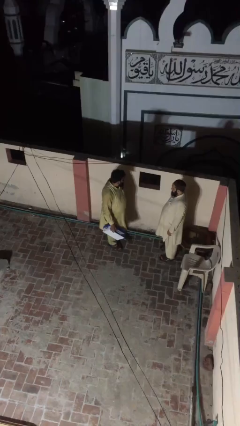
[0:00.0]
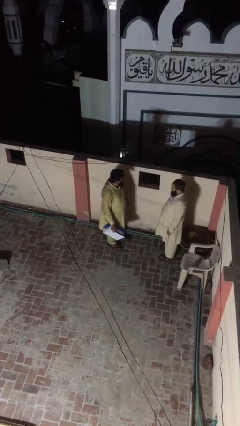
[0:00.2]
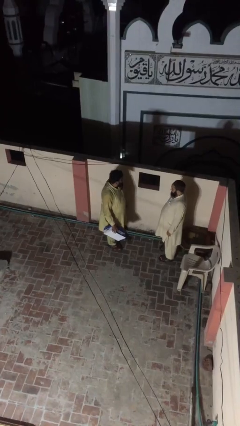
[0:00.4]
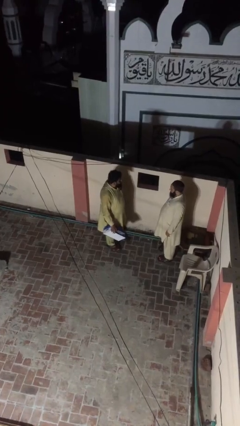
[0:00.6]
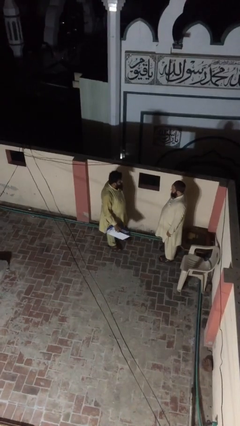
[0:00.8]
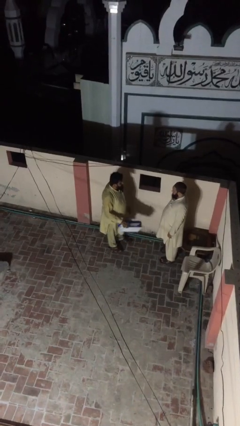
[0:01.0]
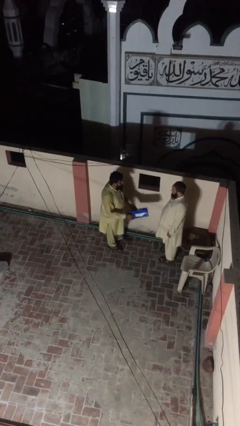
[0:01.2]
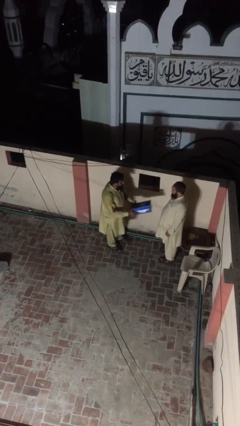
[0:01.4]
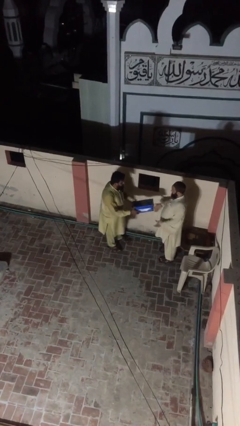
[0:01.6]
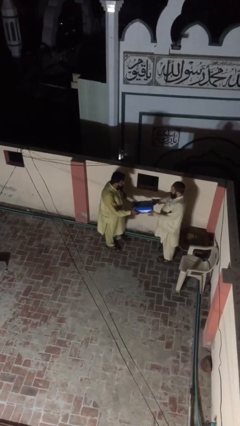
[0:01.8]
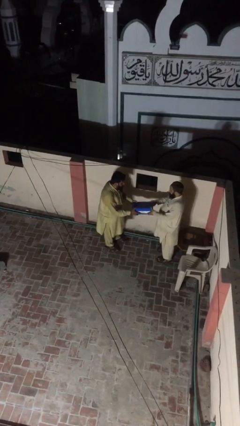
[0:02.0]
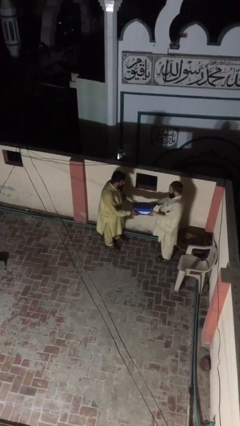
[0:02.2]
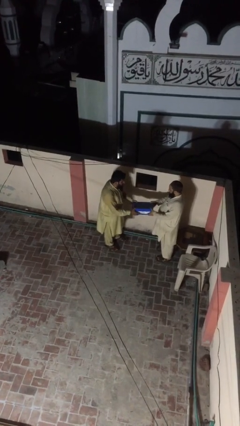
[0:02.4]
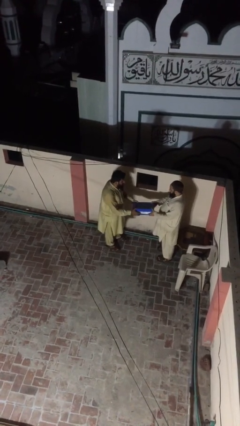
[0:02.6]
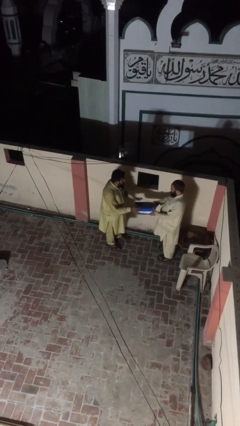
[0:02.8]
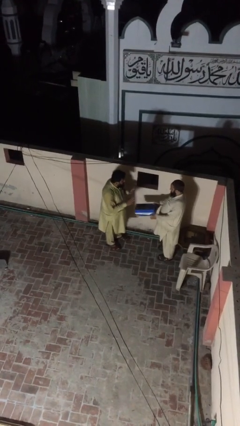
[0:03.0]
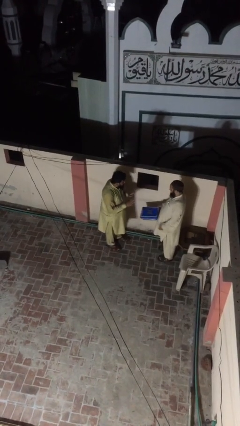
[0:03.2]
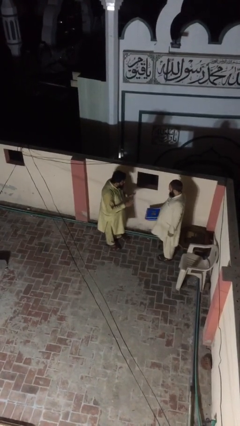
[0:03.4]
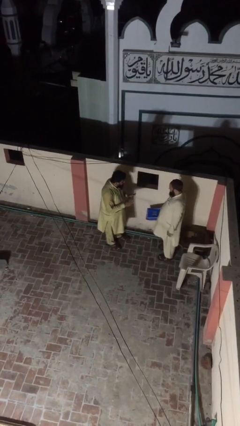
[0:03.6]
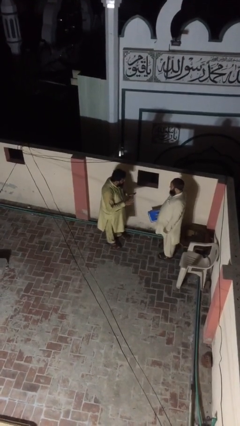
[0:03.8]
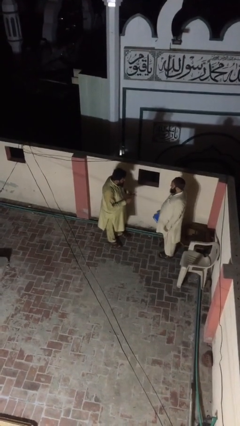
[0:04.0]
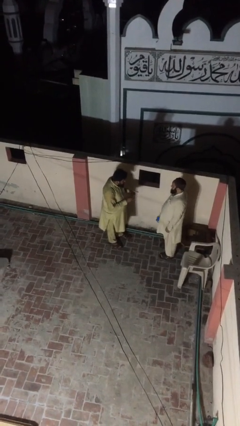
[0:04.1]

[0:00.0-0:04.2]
person transfers object to person

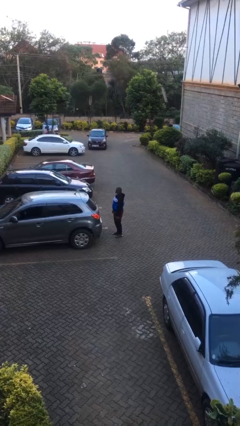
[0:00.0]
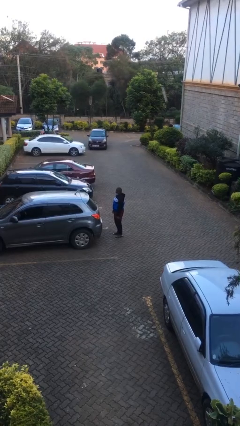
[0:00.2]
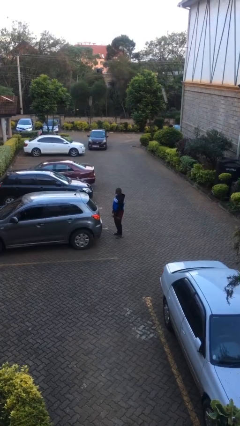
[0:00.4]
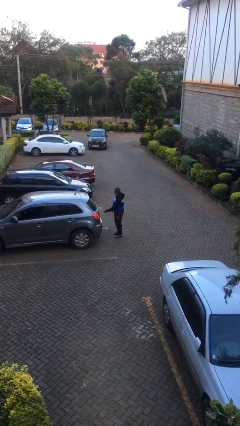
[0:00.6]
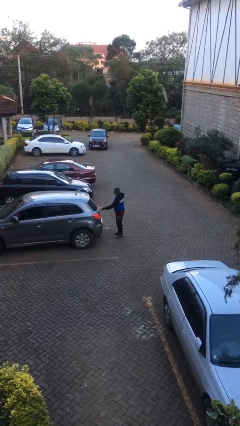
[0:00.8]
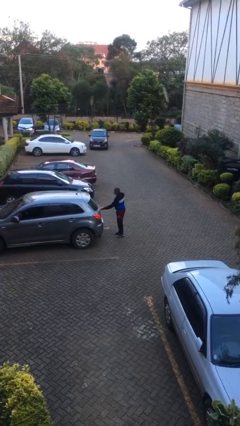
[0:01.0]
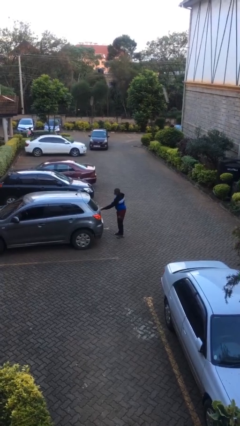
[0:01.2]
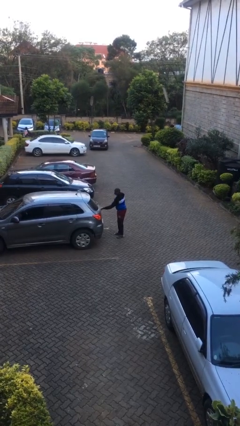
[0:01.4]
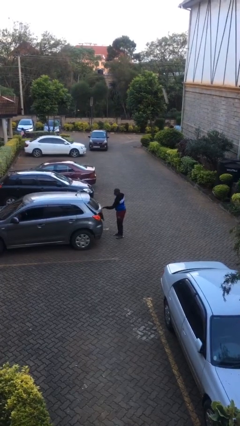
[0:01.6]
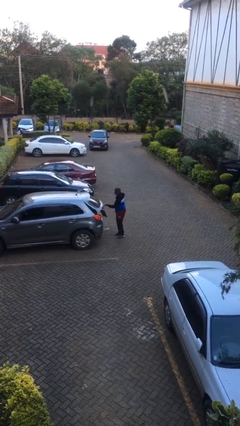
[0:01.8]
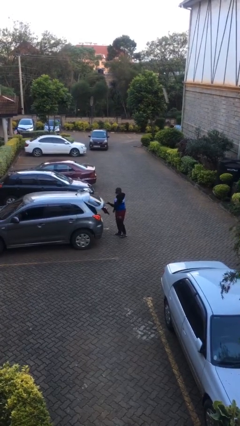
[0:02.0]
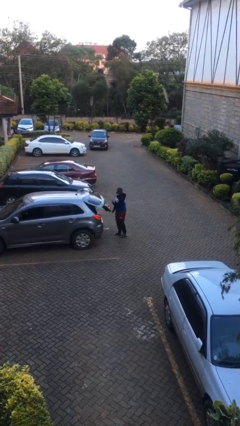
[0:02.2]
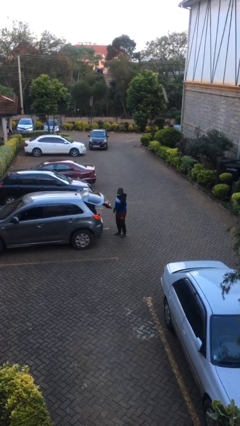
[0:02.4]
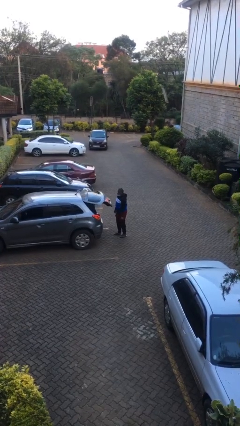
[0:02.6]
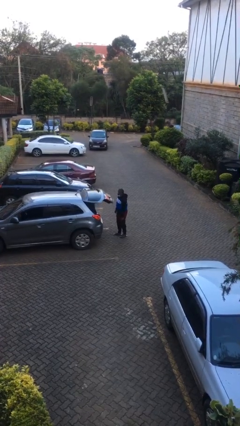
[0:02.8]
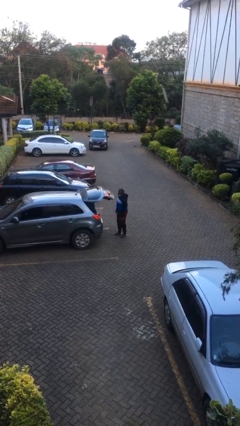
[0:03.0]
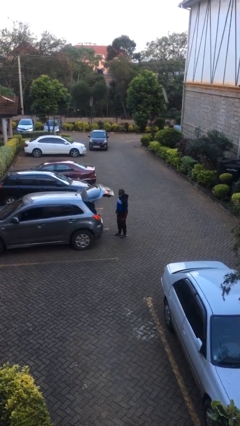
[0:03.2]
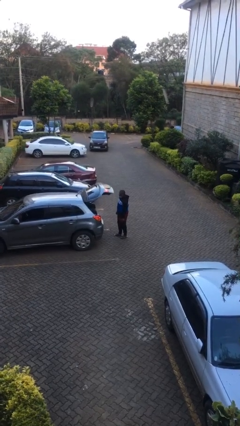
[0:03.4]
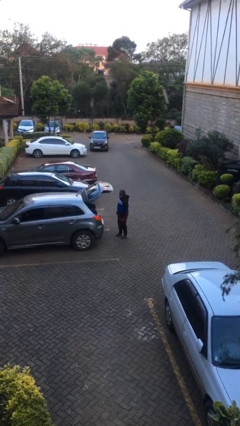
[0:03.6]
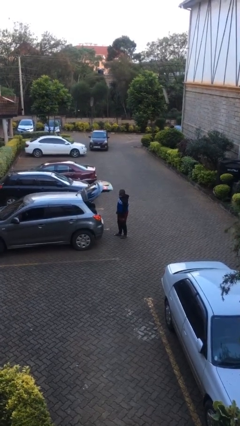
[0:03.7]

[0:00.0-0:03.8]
person opens car trunk

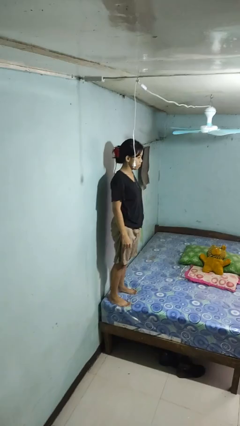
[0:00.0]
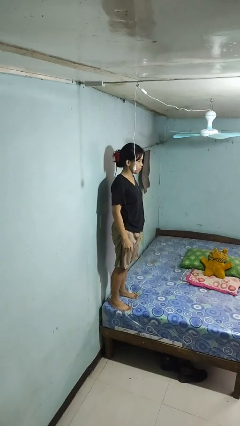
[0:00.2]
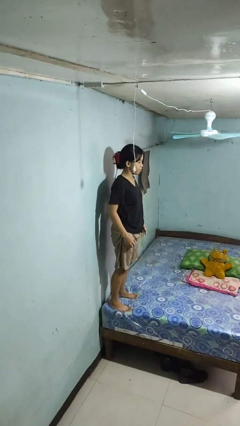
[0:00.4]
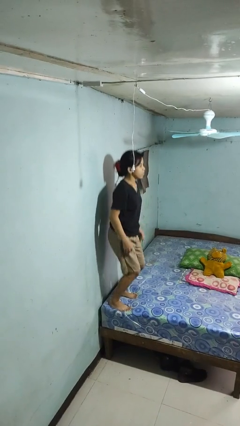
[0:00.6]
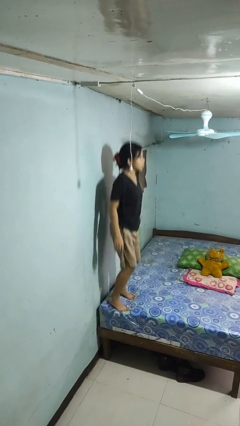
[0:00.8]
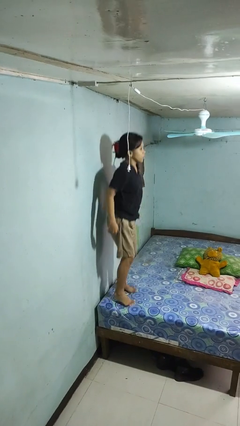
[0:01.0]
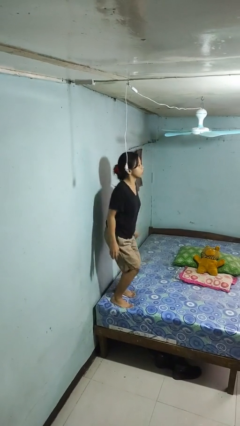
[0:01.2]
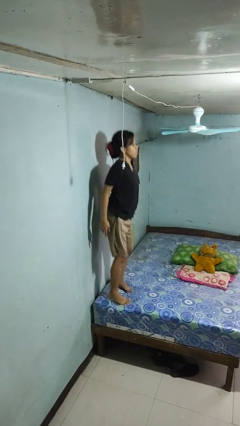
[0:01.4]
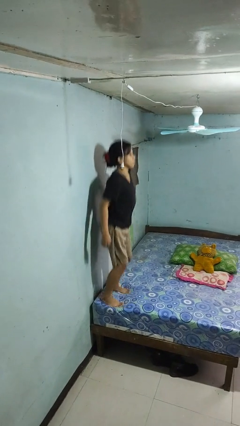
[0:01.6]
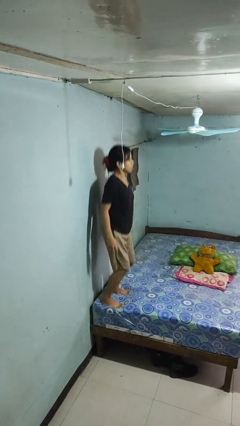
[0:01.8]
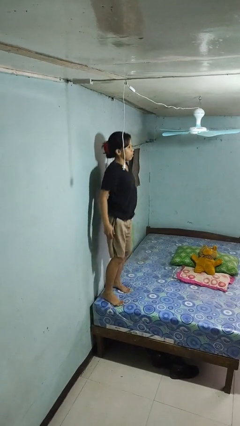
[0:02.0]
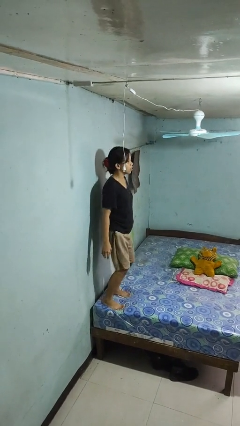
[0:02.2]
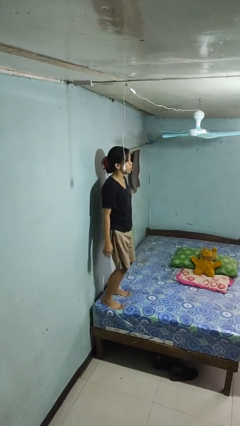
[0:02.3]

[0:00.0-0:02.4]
person jumps on bed

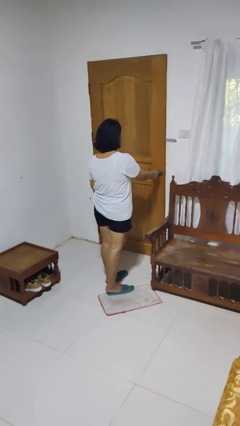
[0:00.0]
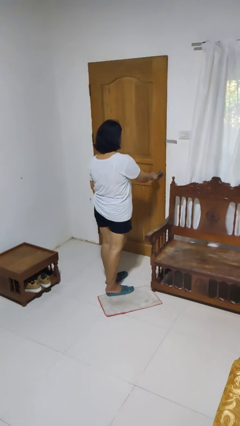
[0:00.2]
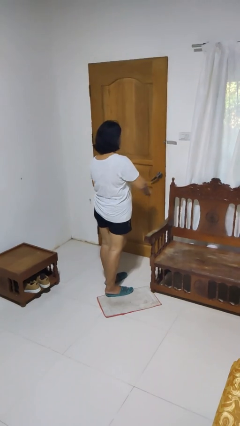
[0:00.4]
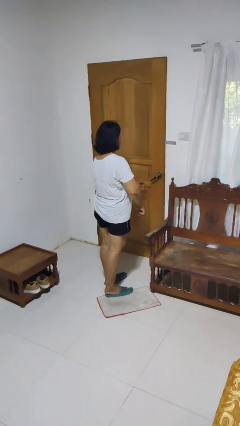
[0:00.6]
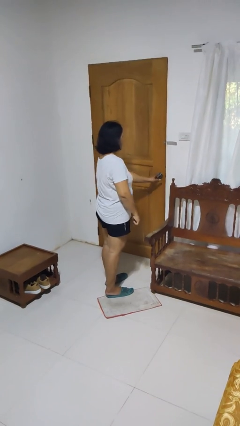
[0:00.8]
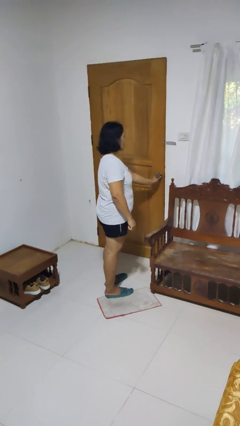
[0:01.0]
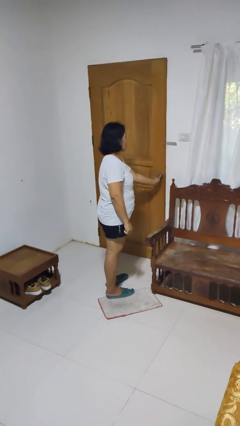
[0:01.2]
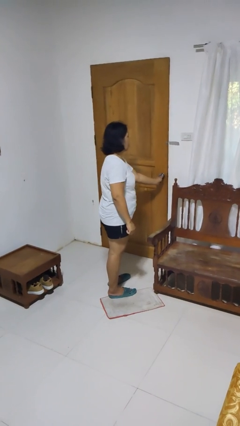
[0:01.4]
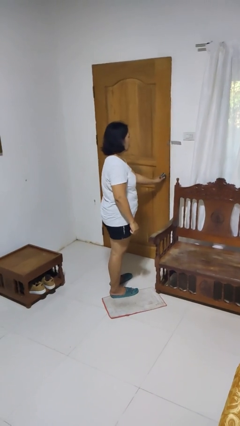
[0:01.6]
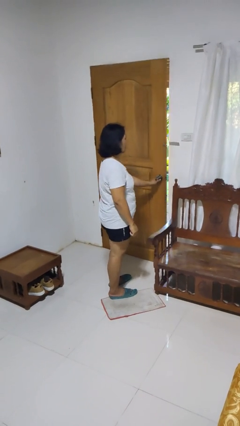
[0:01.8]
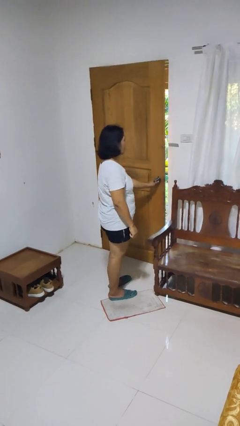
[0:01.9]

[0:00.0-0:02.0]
person opens facility door

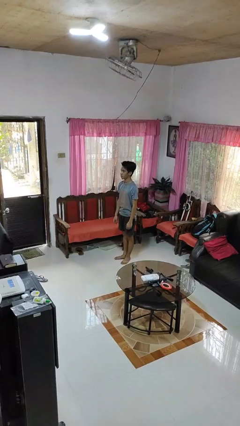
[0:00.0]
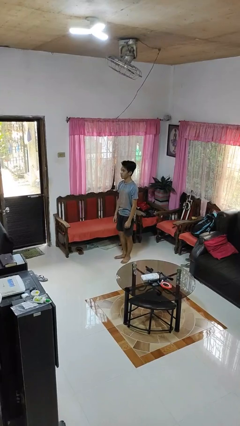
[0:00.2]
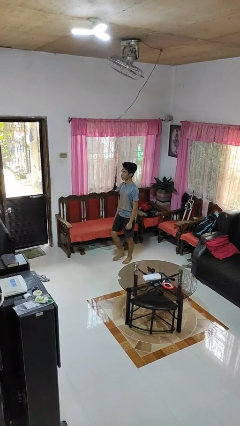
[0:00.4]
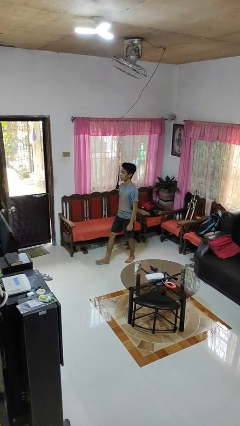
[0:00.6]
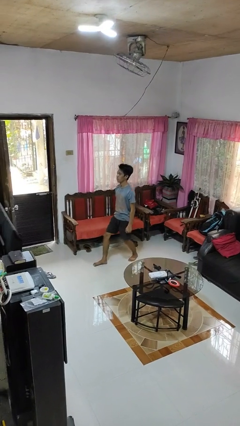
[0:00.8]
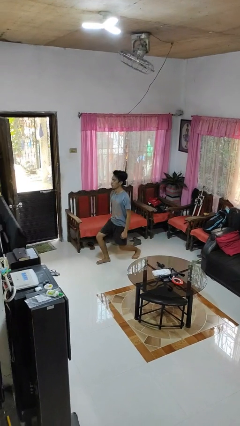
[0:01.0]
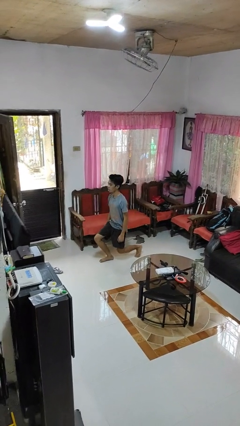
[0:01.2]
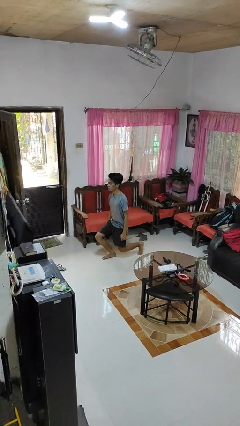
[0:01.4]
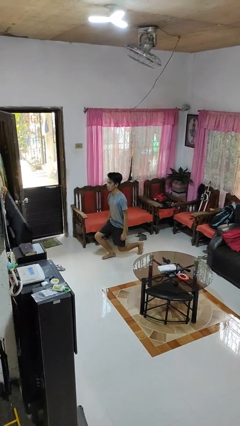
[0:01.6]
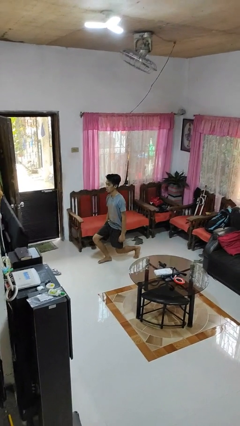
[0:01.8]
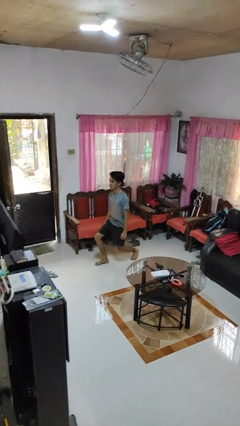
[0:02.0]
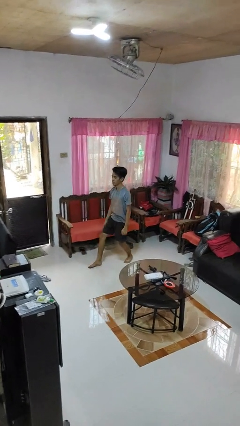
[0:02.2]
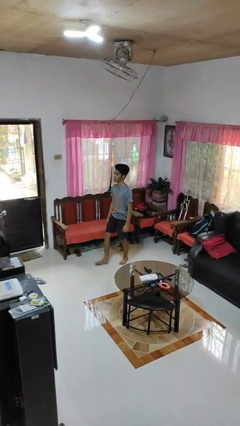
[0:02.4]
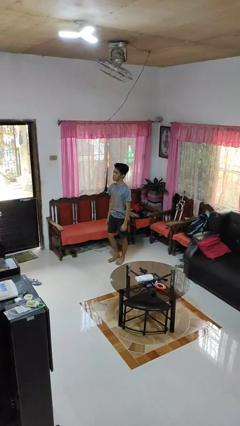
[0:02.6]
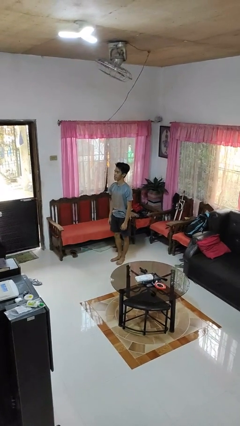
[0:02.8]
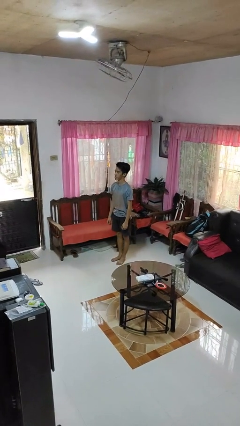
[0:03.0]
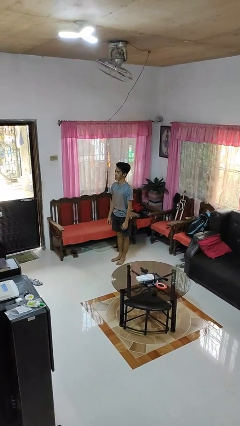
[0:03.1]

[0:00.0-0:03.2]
person exercises with lunges

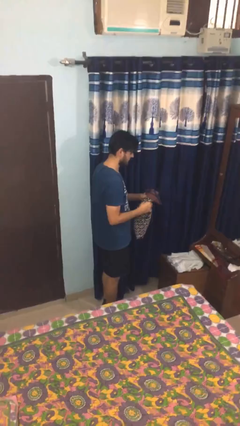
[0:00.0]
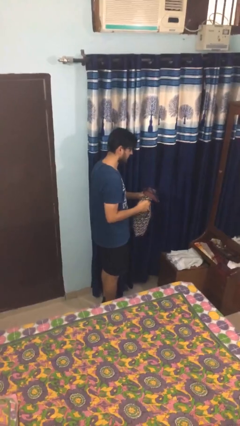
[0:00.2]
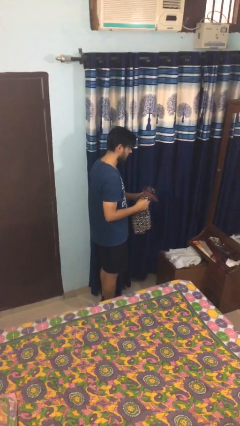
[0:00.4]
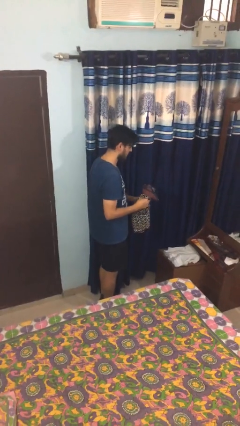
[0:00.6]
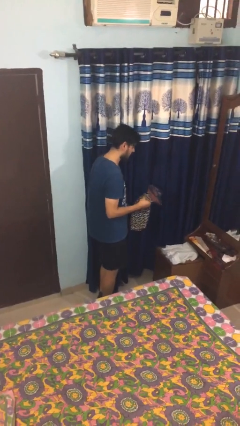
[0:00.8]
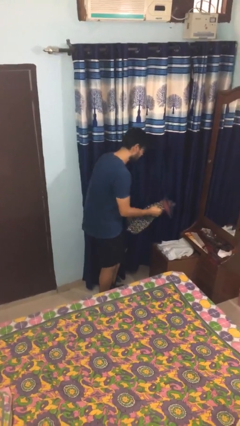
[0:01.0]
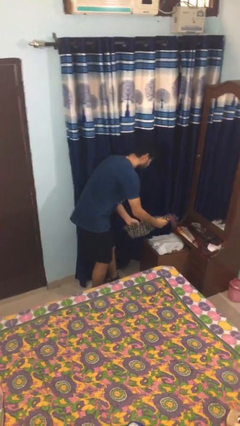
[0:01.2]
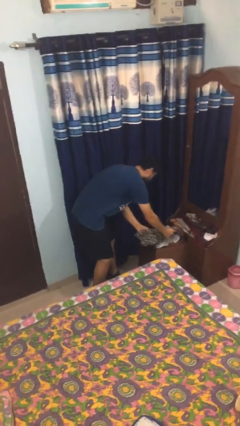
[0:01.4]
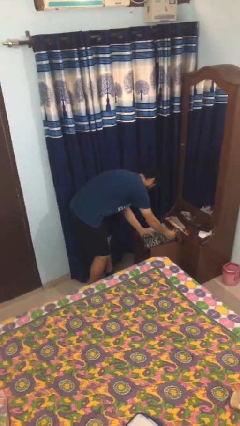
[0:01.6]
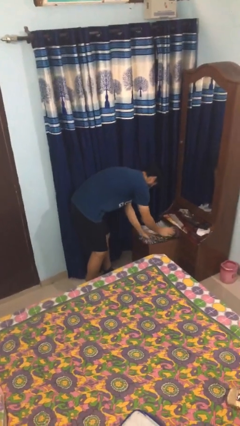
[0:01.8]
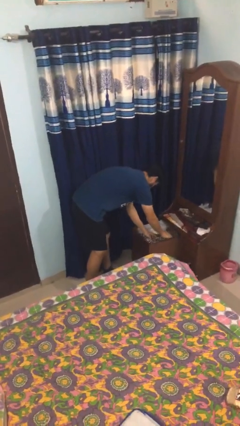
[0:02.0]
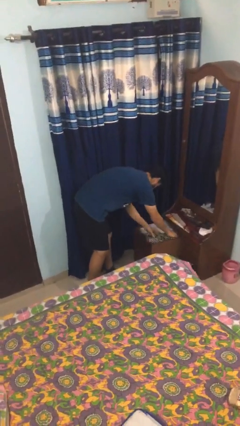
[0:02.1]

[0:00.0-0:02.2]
person puts clothes into dresser
